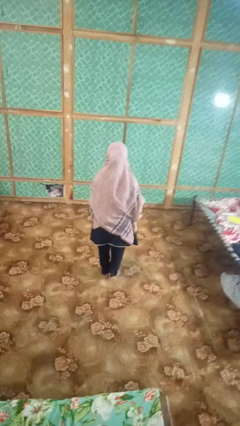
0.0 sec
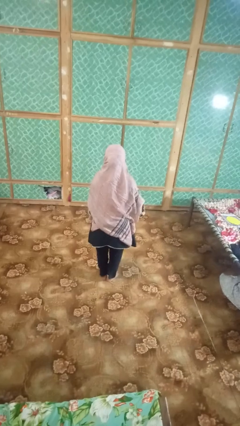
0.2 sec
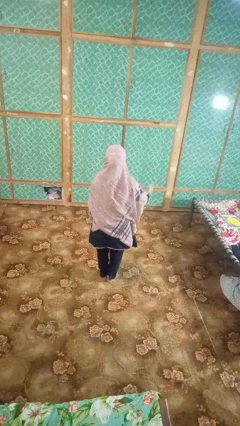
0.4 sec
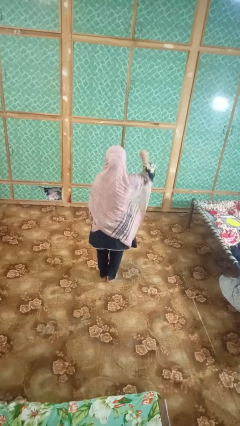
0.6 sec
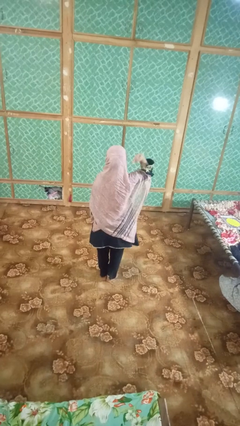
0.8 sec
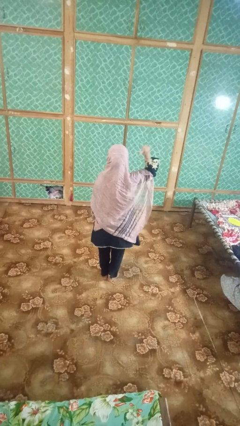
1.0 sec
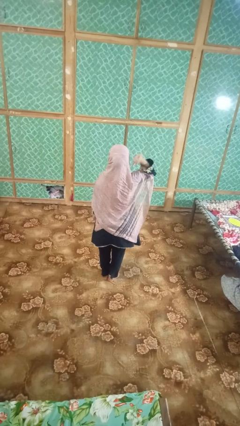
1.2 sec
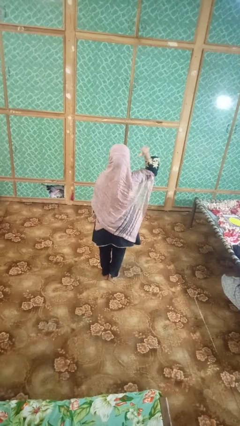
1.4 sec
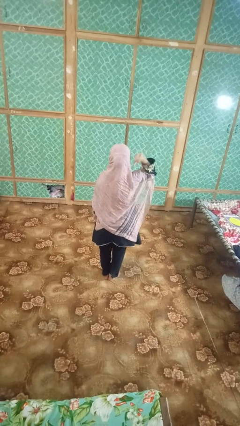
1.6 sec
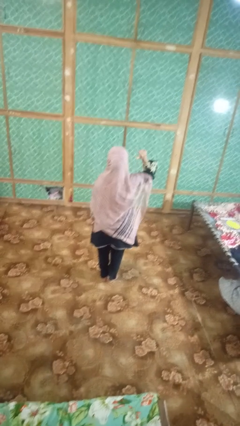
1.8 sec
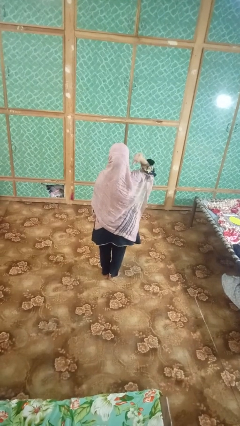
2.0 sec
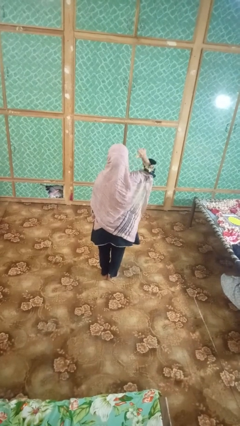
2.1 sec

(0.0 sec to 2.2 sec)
person gestures behind me

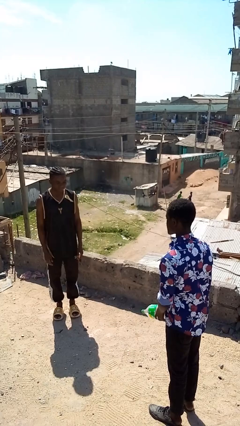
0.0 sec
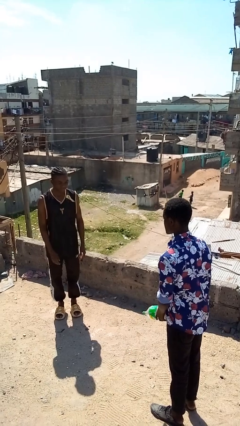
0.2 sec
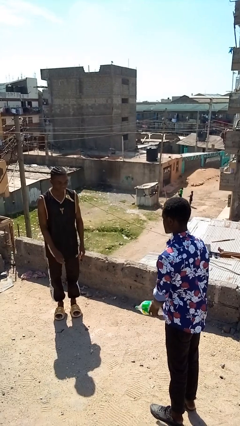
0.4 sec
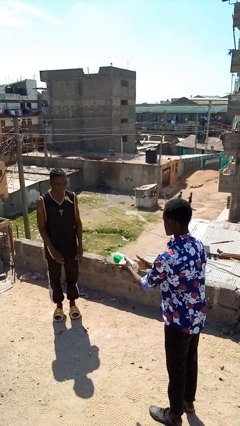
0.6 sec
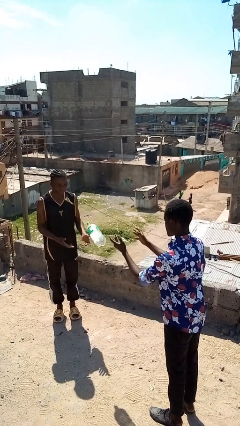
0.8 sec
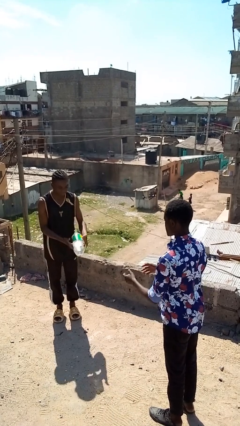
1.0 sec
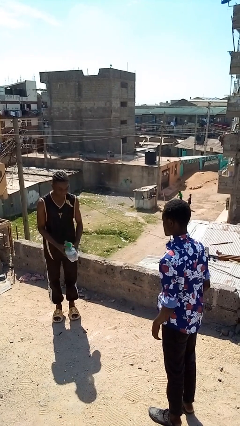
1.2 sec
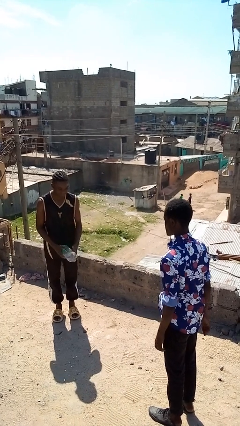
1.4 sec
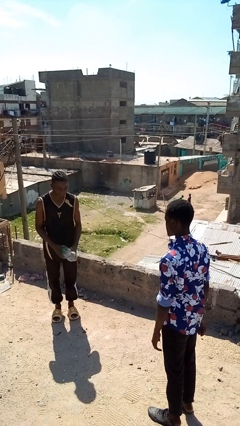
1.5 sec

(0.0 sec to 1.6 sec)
person throws object to person

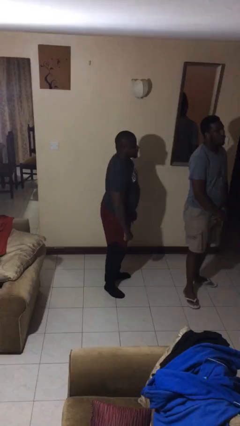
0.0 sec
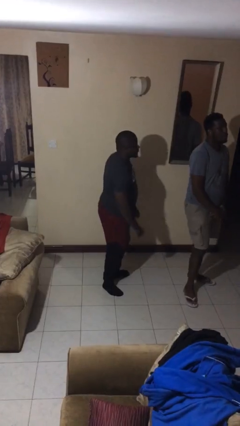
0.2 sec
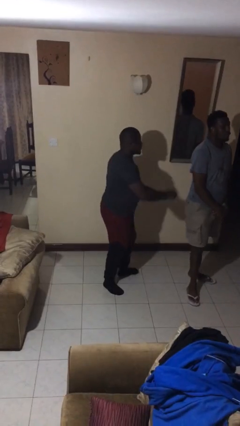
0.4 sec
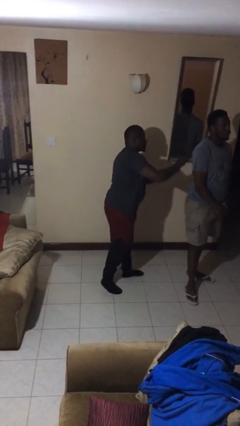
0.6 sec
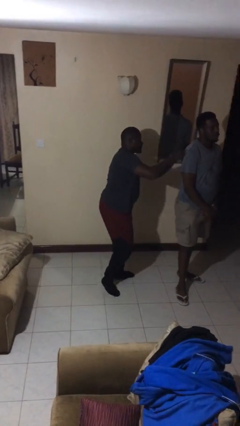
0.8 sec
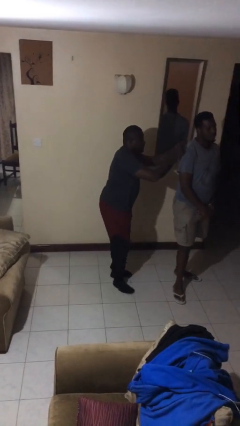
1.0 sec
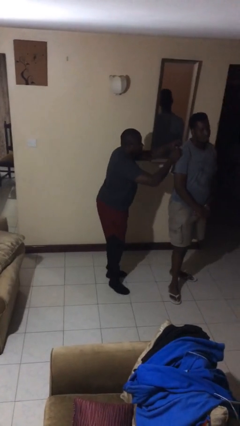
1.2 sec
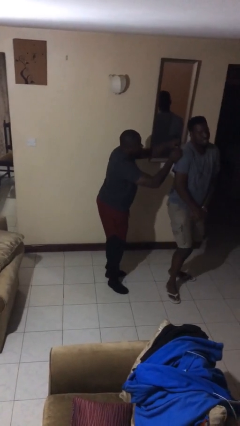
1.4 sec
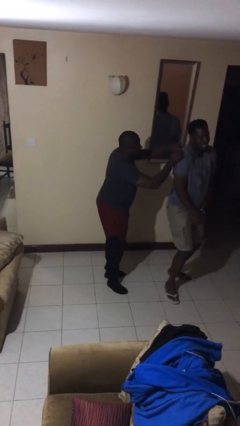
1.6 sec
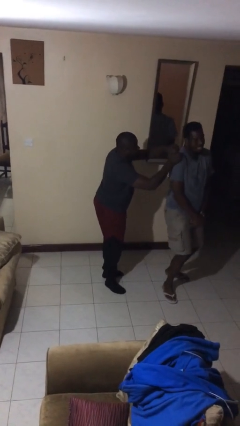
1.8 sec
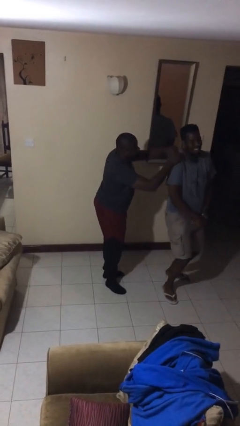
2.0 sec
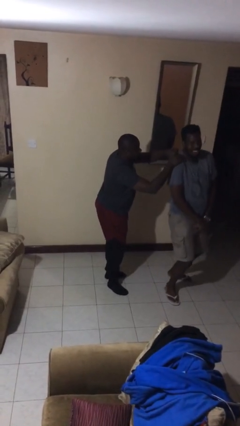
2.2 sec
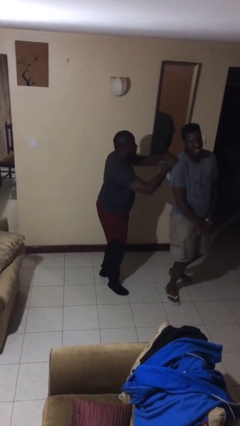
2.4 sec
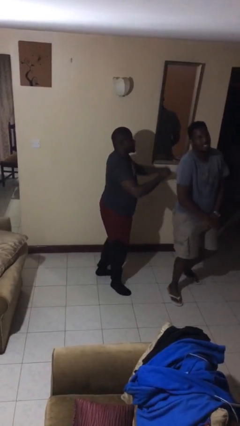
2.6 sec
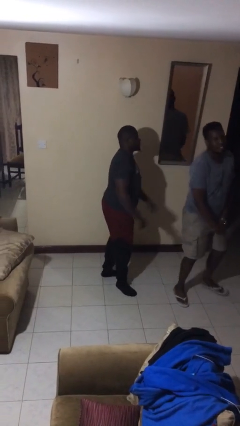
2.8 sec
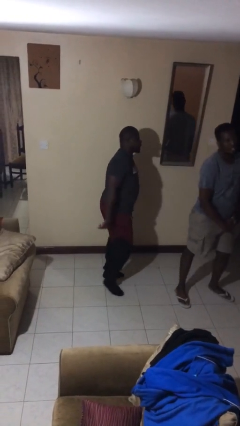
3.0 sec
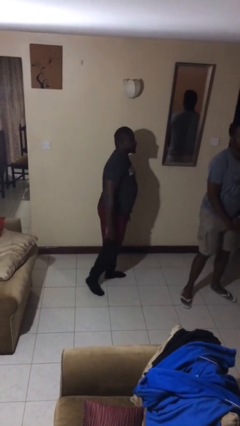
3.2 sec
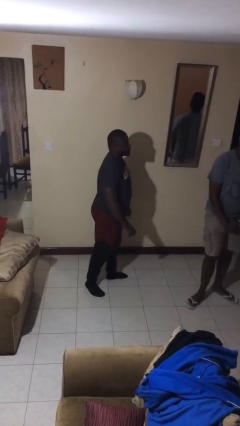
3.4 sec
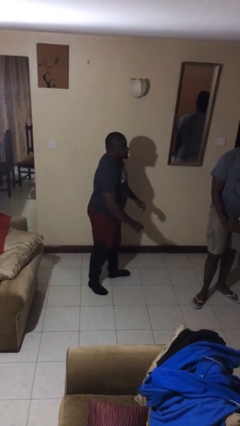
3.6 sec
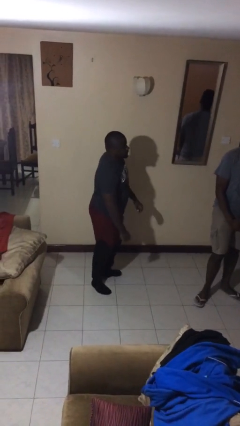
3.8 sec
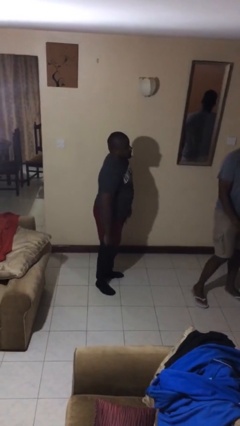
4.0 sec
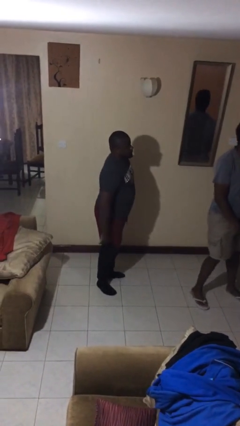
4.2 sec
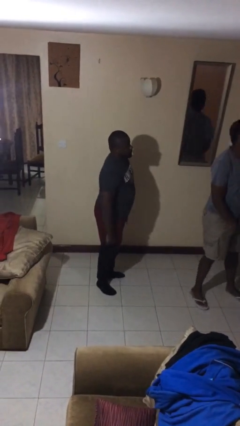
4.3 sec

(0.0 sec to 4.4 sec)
person tickles person

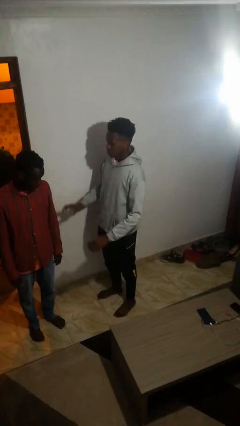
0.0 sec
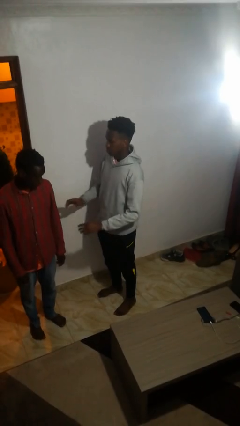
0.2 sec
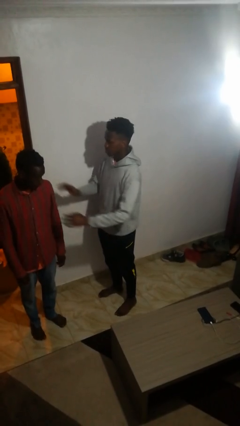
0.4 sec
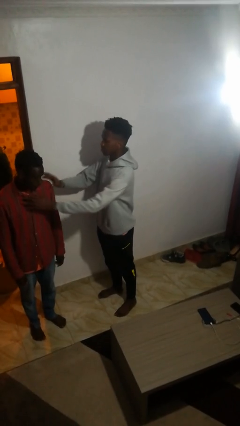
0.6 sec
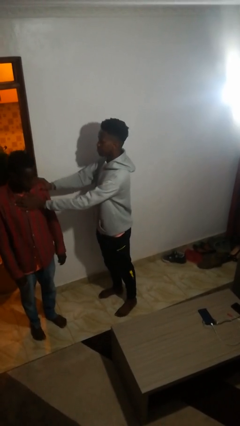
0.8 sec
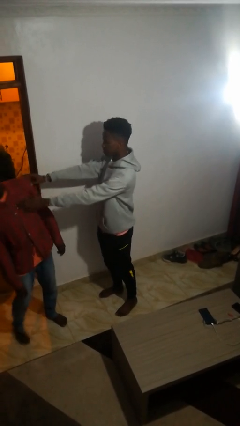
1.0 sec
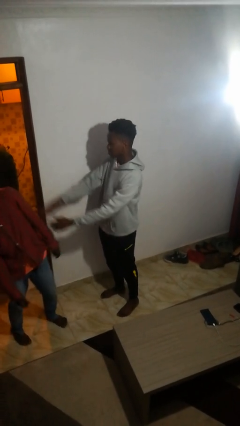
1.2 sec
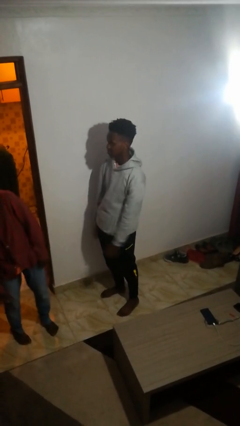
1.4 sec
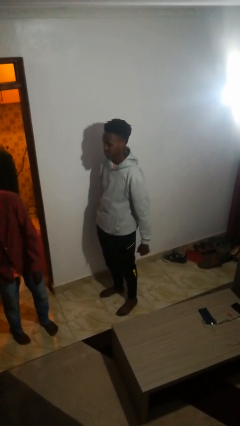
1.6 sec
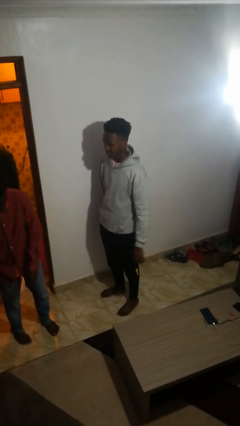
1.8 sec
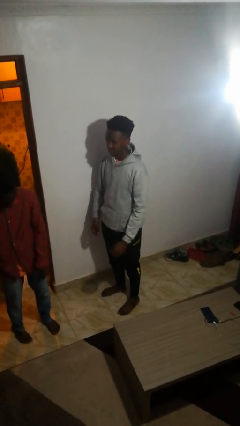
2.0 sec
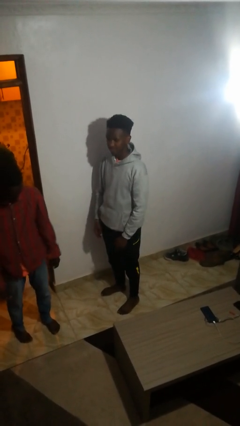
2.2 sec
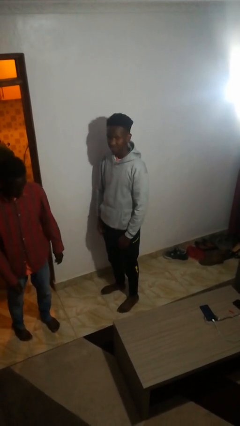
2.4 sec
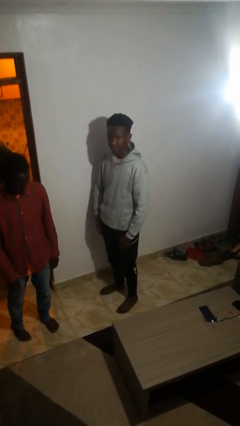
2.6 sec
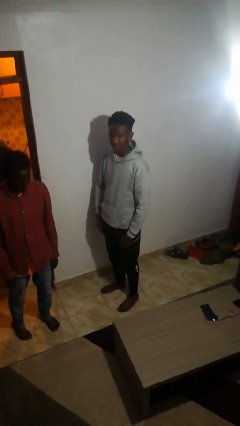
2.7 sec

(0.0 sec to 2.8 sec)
person shoves person

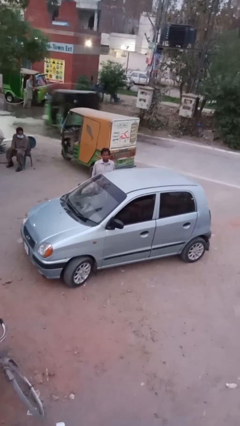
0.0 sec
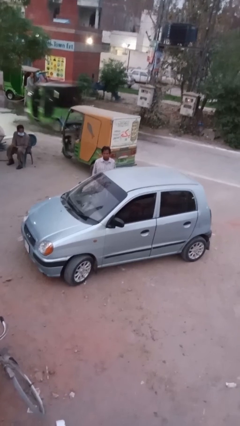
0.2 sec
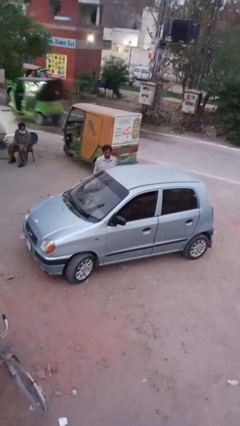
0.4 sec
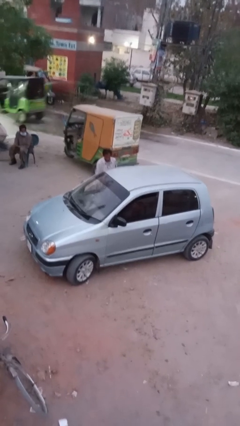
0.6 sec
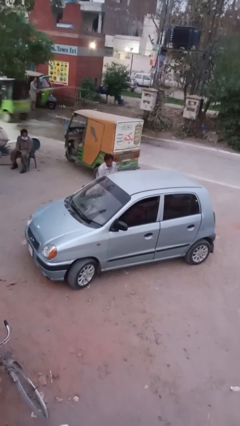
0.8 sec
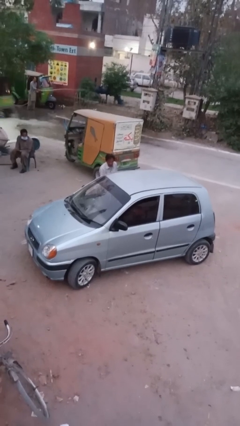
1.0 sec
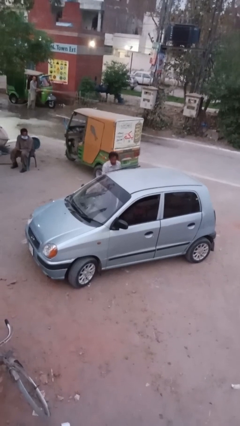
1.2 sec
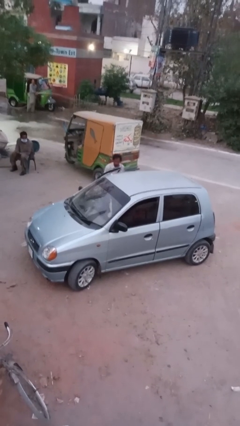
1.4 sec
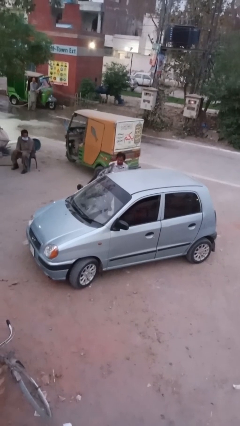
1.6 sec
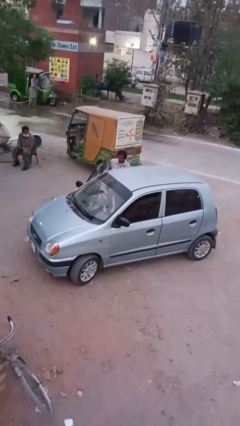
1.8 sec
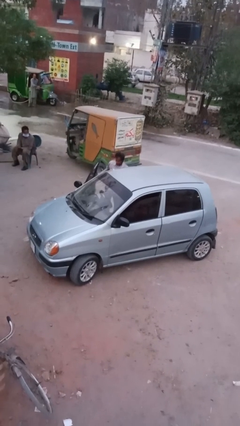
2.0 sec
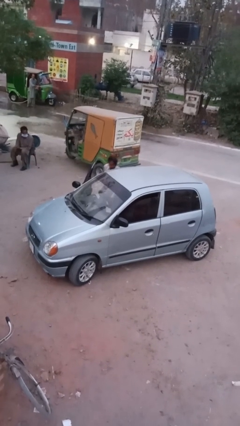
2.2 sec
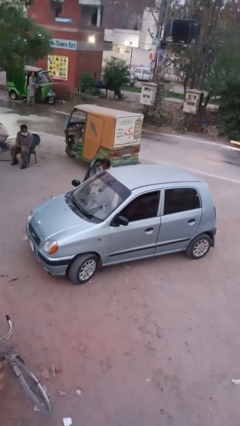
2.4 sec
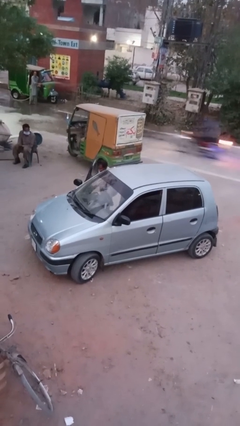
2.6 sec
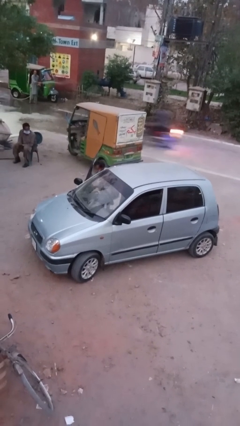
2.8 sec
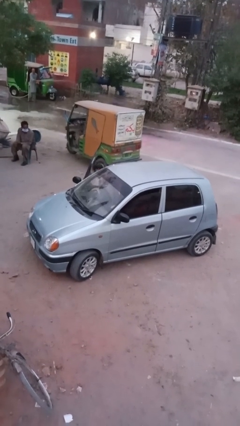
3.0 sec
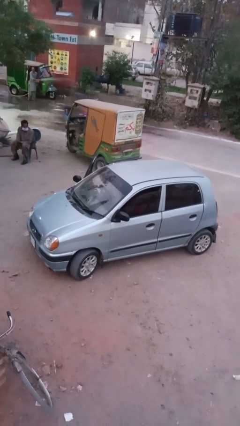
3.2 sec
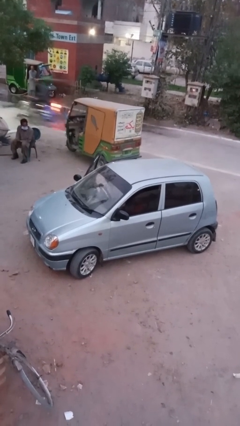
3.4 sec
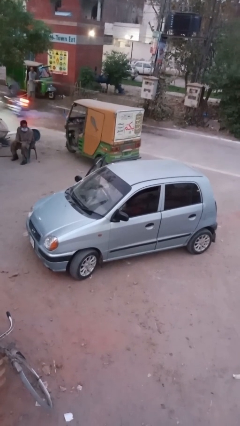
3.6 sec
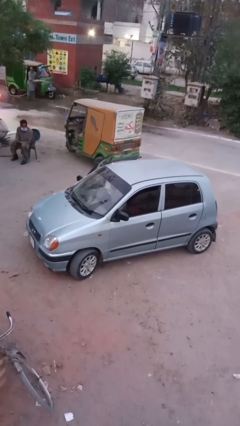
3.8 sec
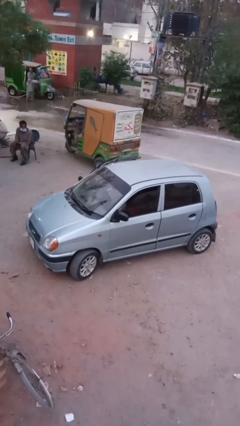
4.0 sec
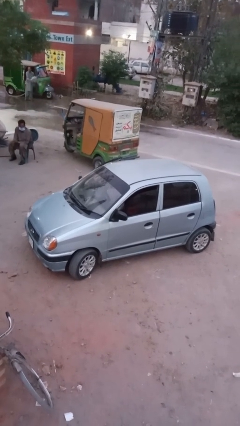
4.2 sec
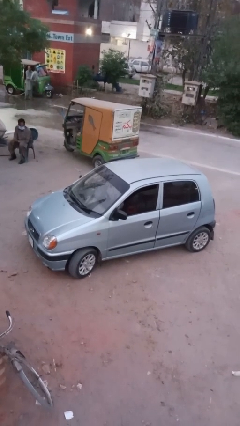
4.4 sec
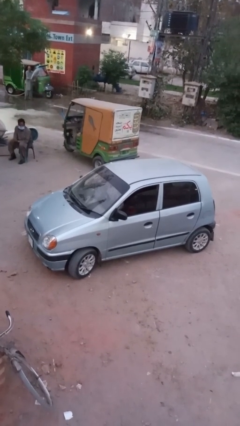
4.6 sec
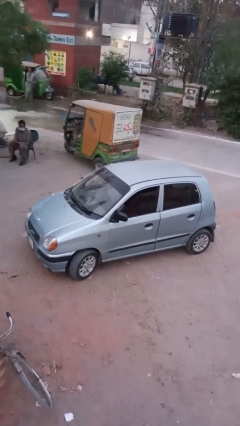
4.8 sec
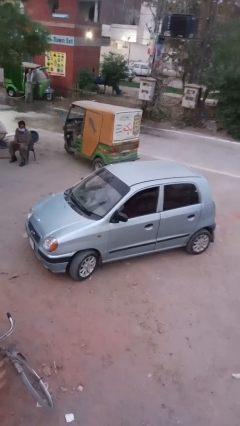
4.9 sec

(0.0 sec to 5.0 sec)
person opens facility door

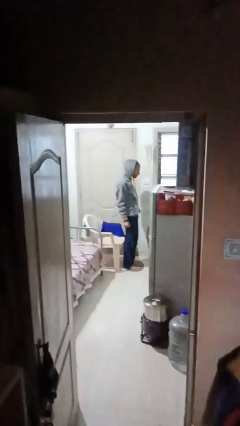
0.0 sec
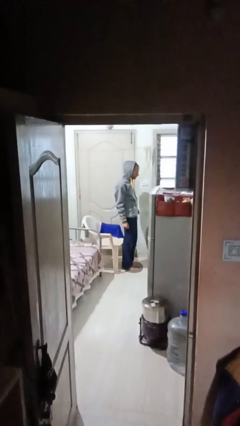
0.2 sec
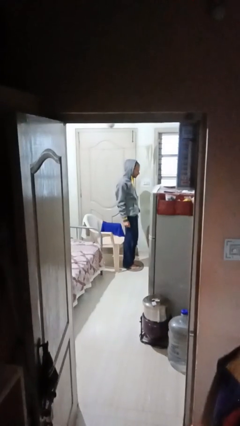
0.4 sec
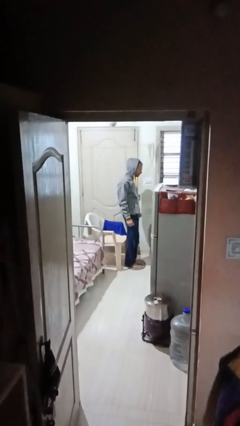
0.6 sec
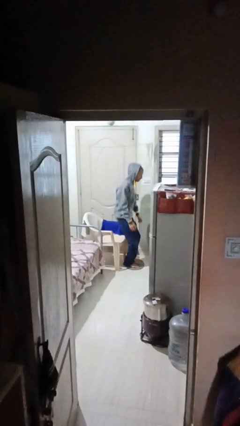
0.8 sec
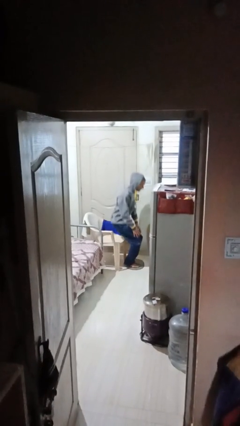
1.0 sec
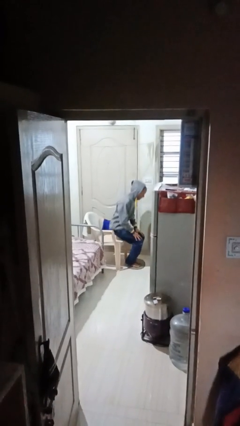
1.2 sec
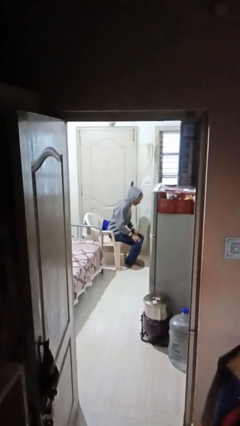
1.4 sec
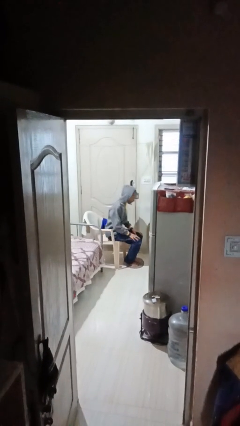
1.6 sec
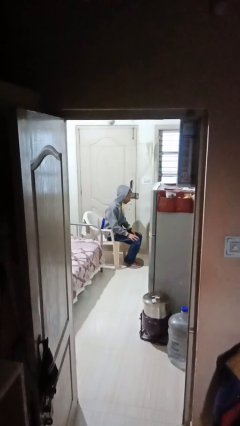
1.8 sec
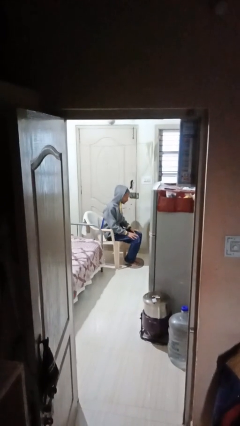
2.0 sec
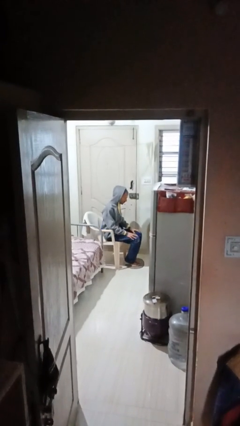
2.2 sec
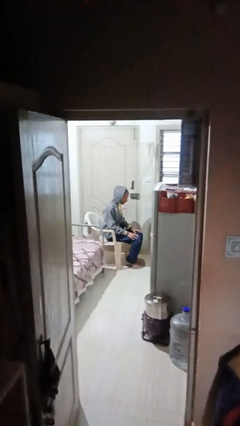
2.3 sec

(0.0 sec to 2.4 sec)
person sits down
